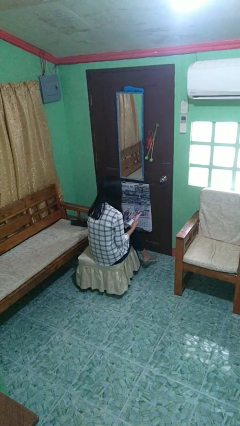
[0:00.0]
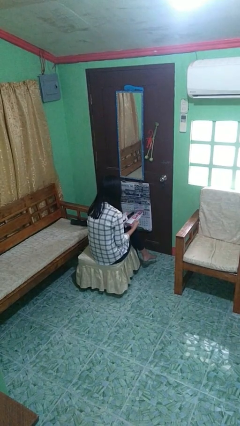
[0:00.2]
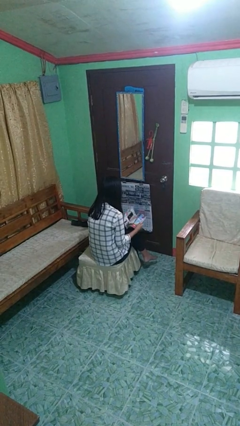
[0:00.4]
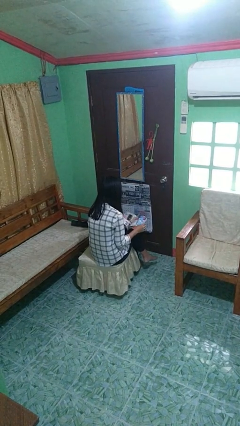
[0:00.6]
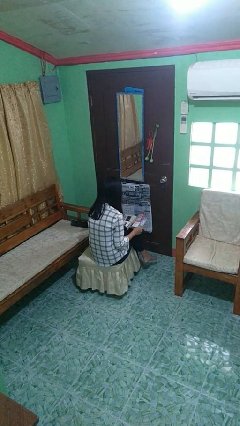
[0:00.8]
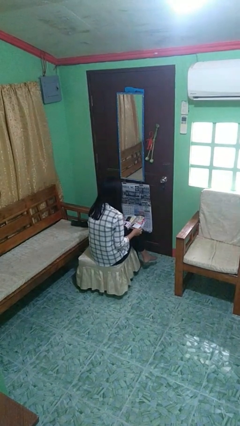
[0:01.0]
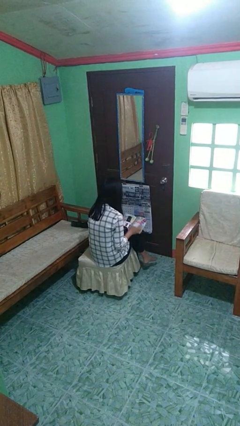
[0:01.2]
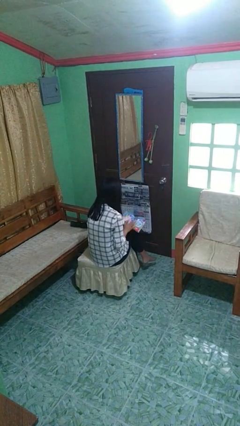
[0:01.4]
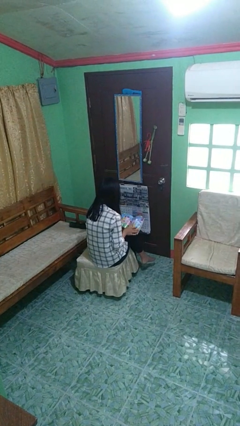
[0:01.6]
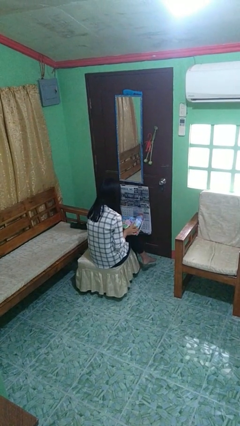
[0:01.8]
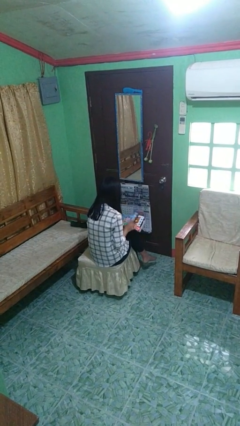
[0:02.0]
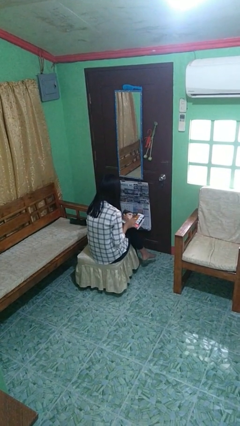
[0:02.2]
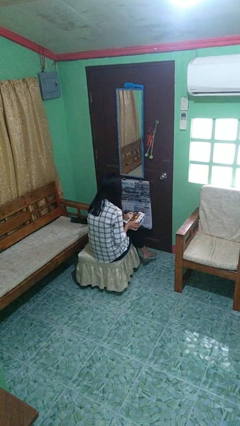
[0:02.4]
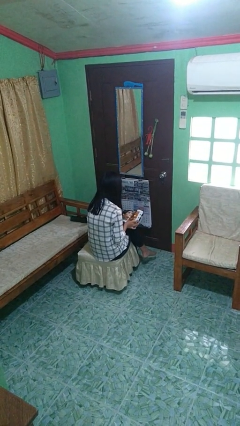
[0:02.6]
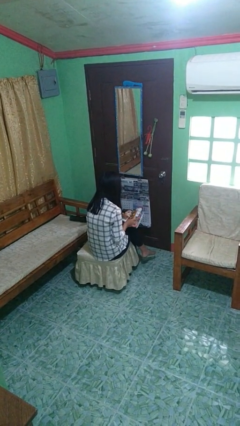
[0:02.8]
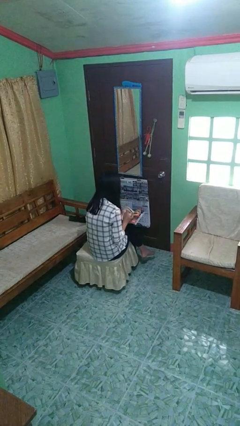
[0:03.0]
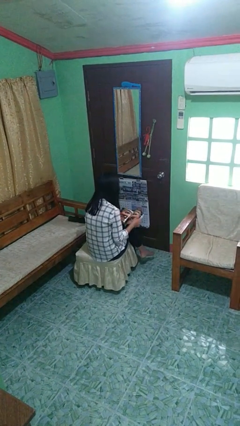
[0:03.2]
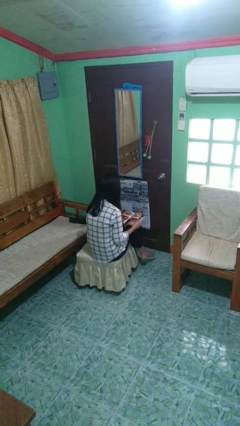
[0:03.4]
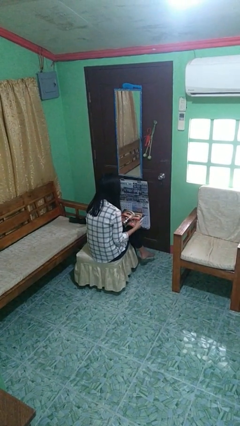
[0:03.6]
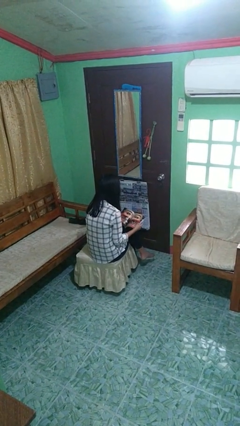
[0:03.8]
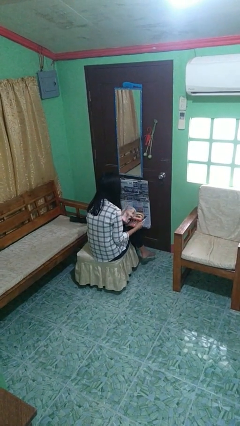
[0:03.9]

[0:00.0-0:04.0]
person reads magazine

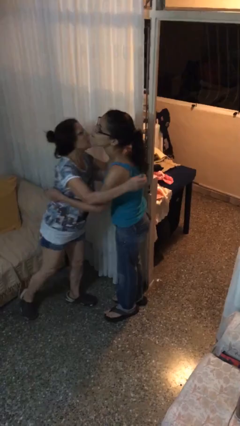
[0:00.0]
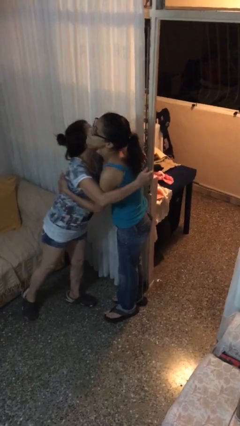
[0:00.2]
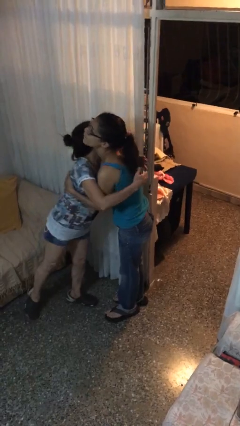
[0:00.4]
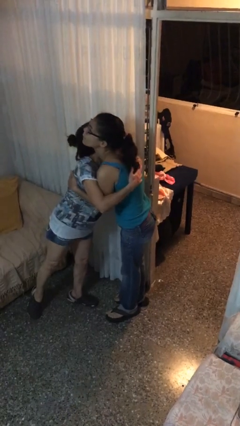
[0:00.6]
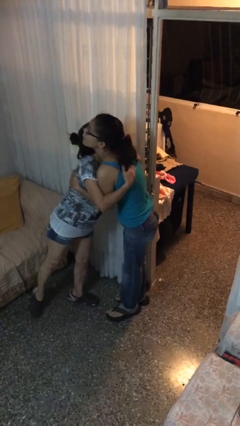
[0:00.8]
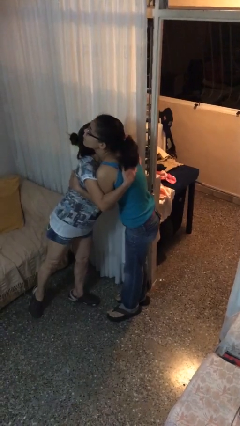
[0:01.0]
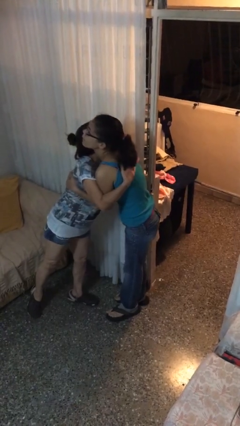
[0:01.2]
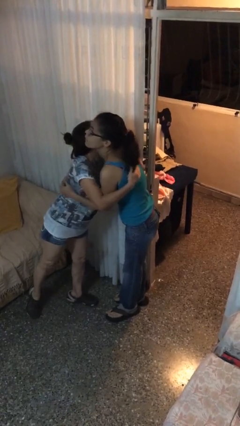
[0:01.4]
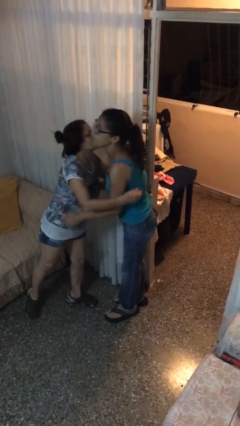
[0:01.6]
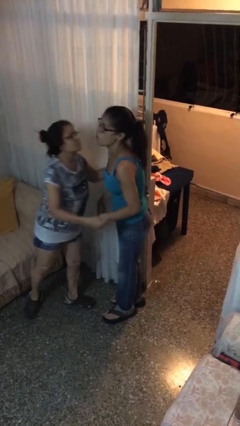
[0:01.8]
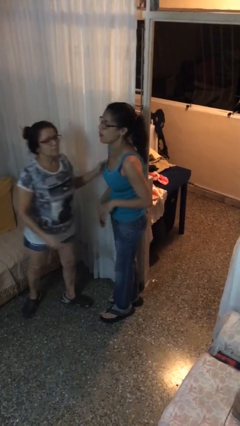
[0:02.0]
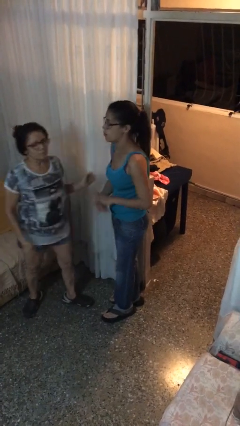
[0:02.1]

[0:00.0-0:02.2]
person embraces person

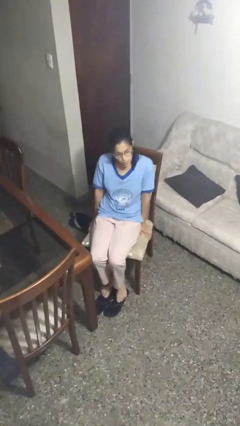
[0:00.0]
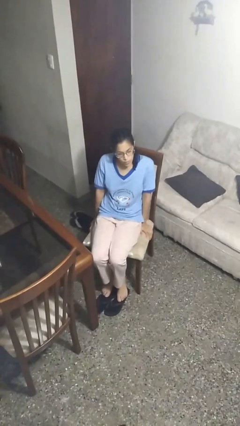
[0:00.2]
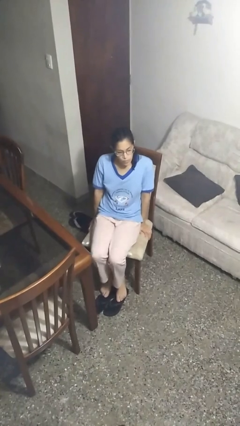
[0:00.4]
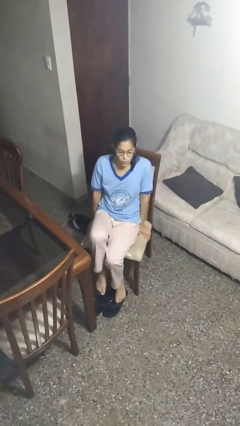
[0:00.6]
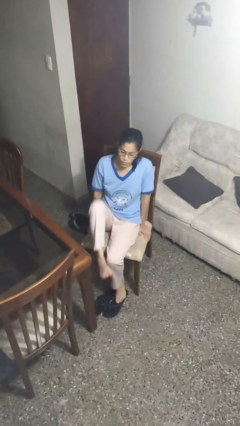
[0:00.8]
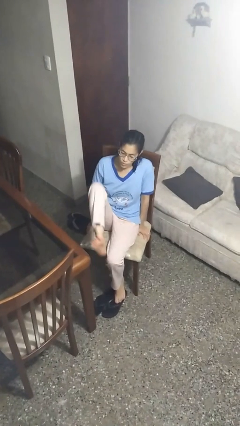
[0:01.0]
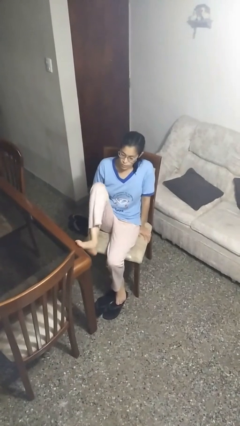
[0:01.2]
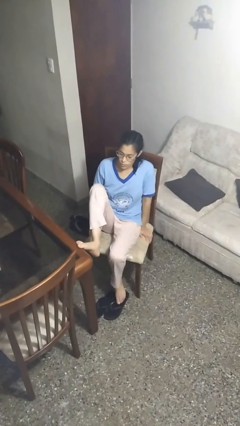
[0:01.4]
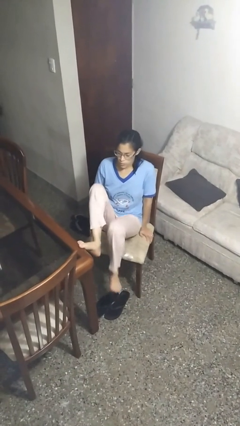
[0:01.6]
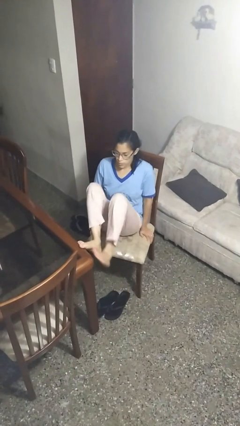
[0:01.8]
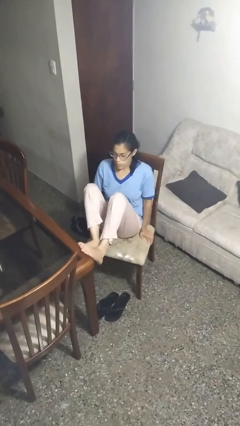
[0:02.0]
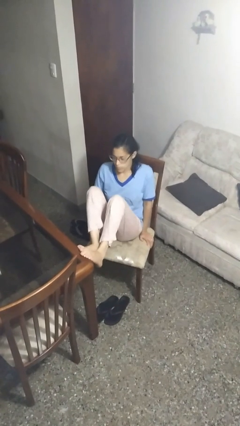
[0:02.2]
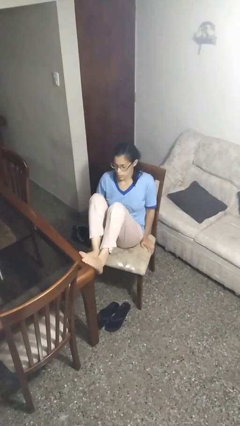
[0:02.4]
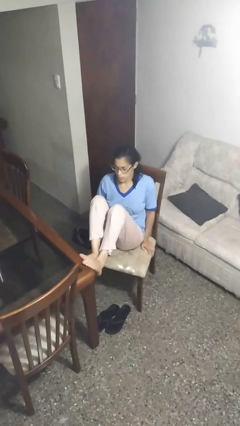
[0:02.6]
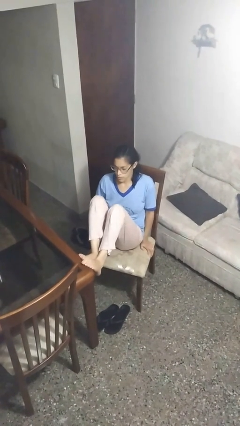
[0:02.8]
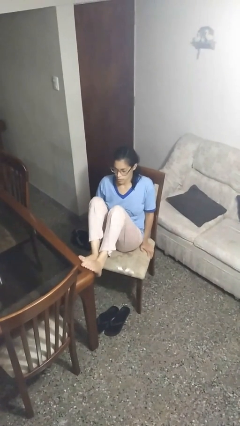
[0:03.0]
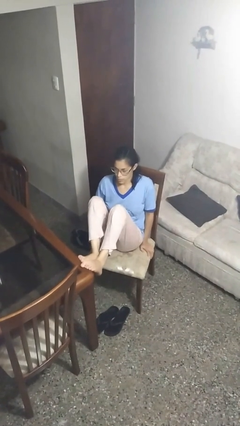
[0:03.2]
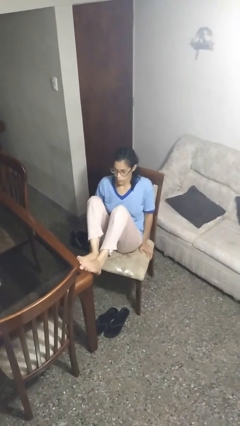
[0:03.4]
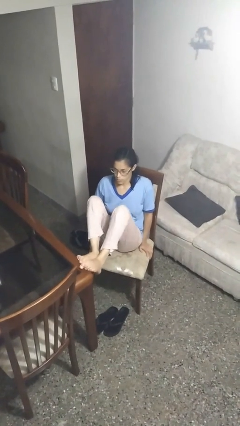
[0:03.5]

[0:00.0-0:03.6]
person puts feet up

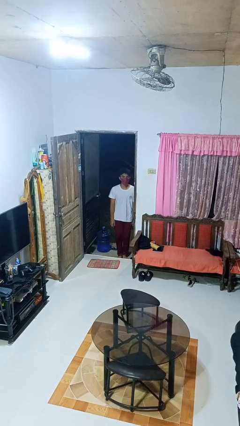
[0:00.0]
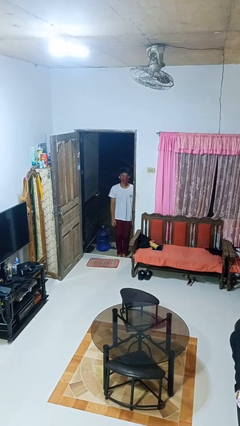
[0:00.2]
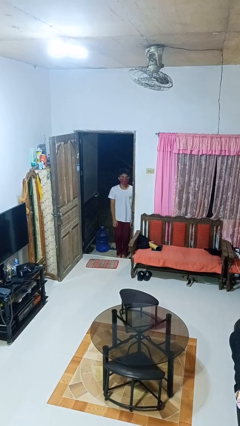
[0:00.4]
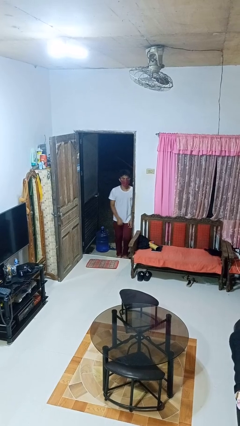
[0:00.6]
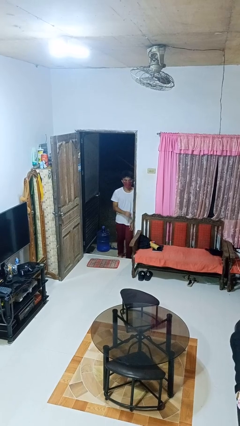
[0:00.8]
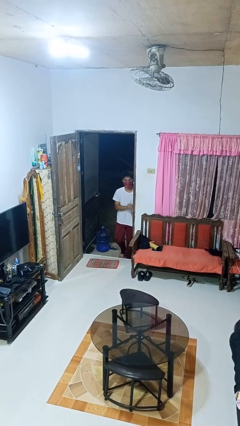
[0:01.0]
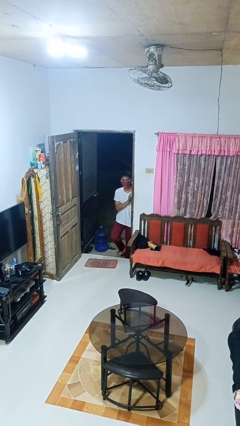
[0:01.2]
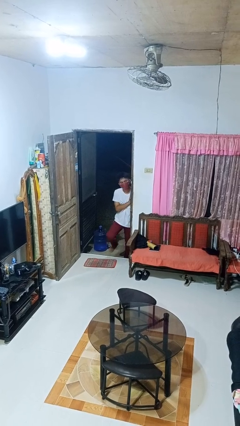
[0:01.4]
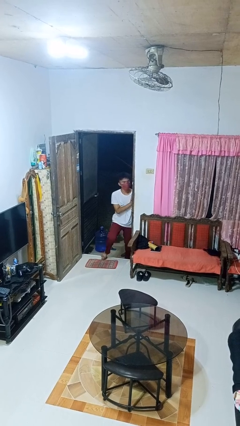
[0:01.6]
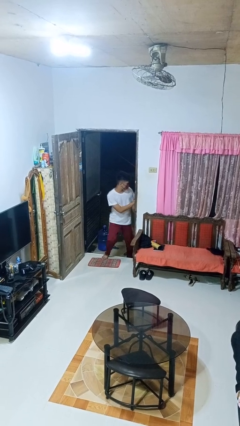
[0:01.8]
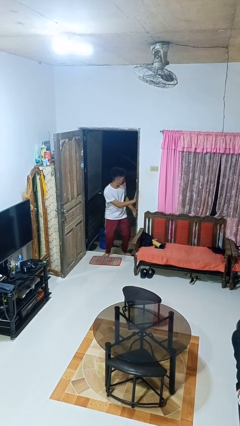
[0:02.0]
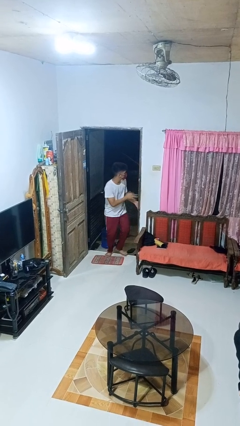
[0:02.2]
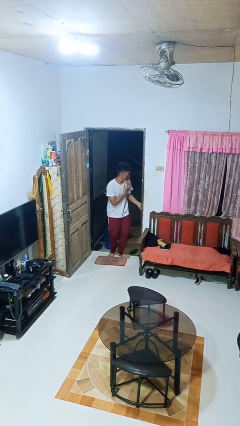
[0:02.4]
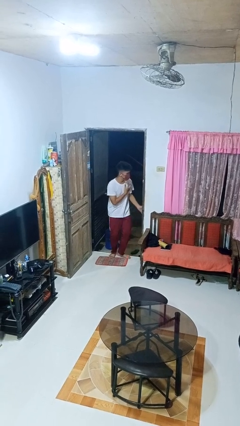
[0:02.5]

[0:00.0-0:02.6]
person bumps into wall

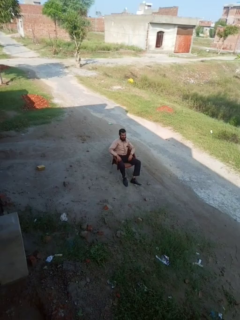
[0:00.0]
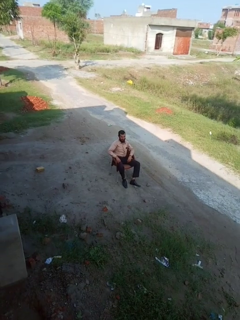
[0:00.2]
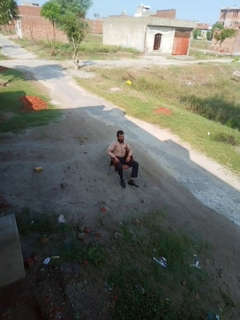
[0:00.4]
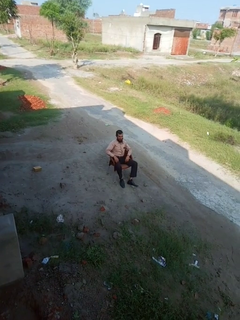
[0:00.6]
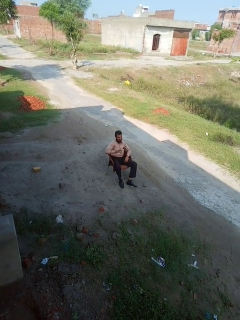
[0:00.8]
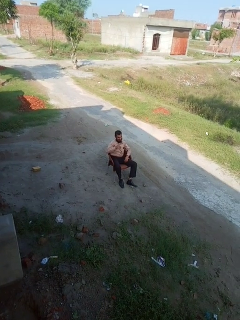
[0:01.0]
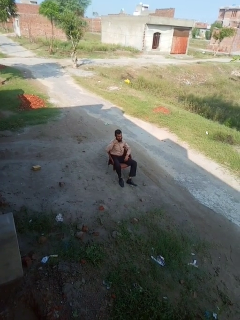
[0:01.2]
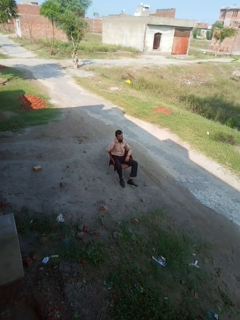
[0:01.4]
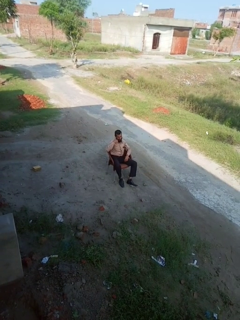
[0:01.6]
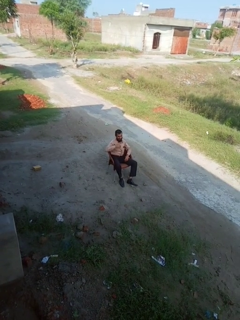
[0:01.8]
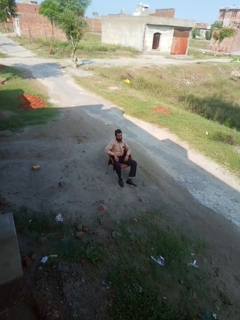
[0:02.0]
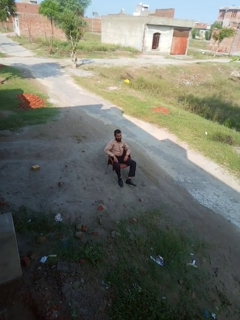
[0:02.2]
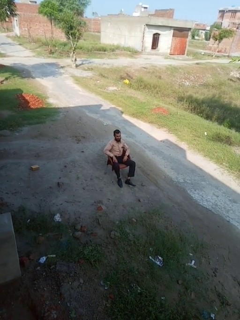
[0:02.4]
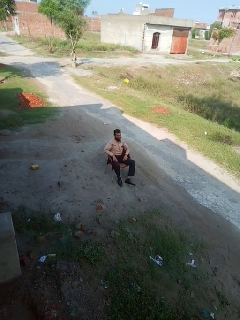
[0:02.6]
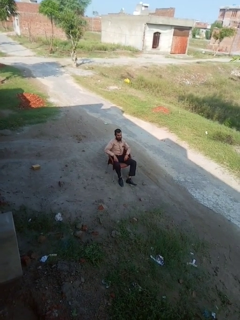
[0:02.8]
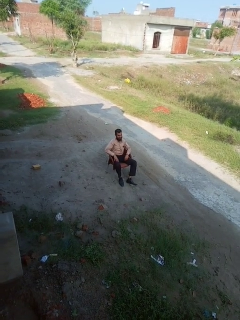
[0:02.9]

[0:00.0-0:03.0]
person gestures call me

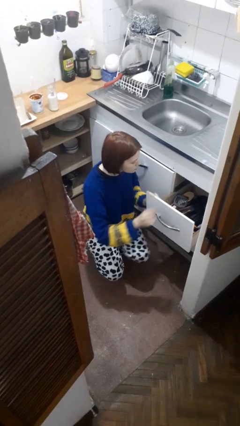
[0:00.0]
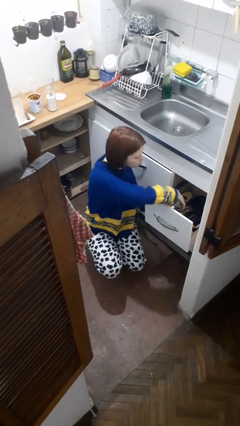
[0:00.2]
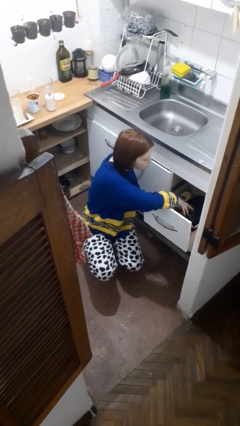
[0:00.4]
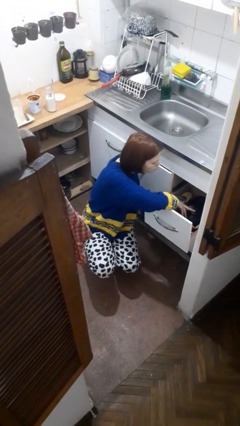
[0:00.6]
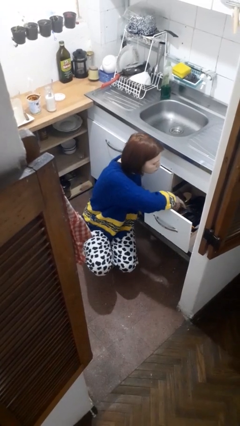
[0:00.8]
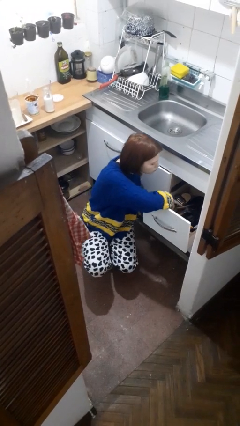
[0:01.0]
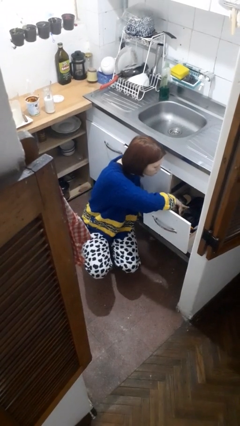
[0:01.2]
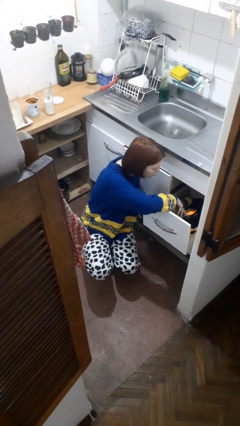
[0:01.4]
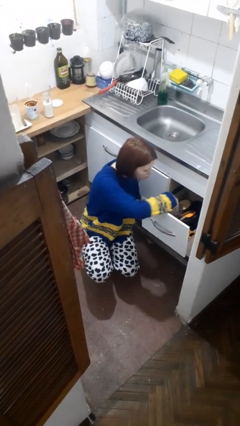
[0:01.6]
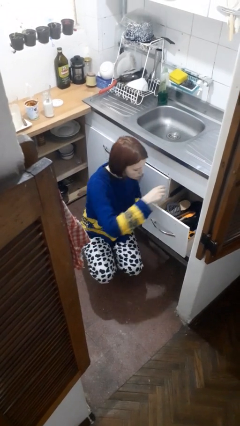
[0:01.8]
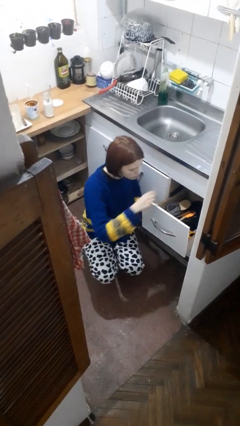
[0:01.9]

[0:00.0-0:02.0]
person searches in kitchen drawer

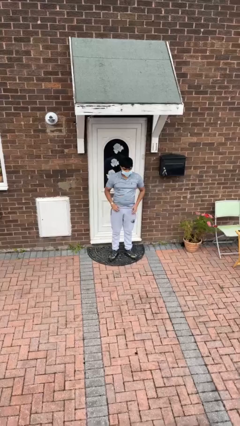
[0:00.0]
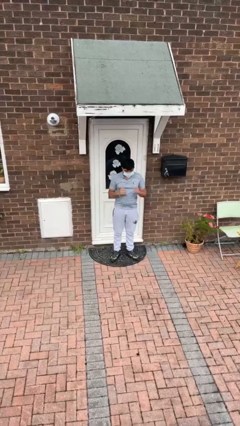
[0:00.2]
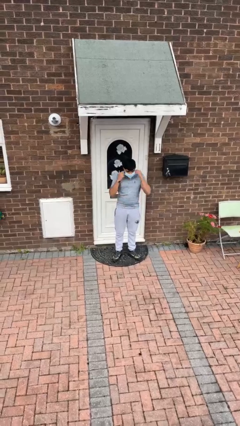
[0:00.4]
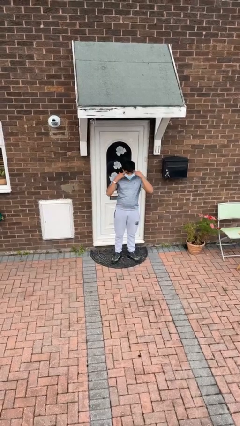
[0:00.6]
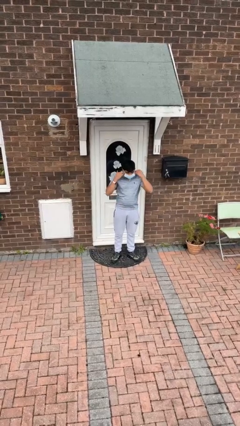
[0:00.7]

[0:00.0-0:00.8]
person takes off facemask
